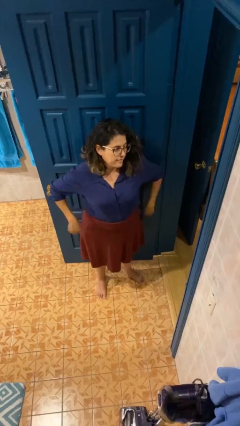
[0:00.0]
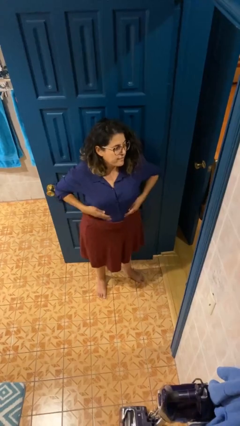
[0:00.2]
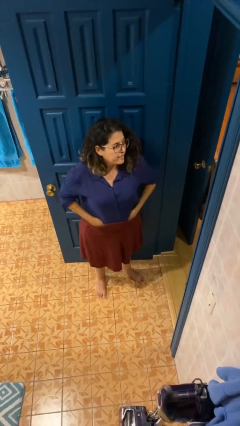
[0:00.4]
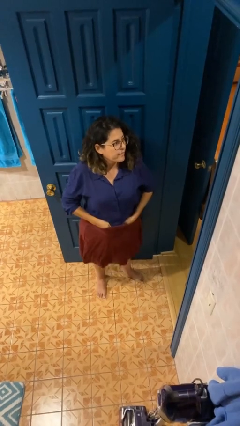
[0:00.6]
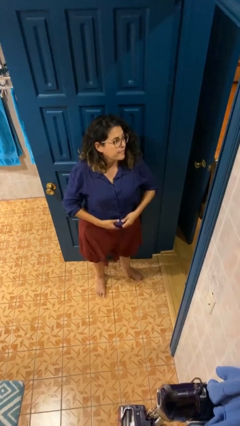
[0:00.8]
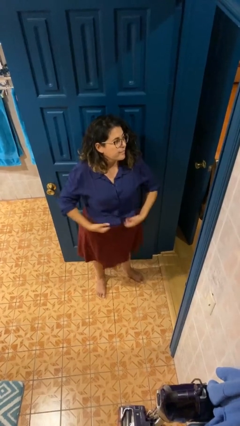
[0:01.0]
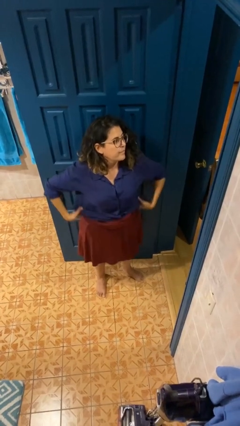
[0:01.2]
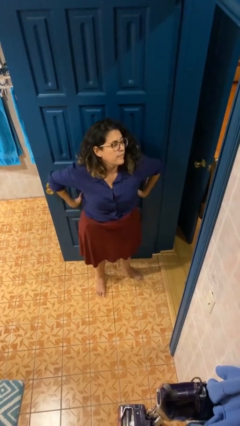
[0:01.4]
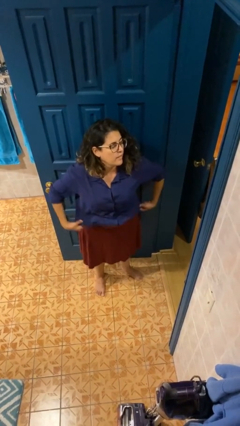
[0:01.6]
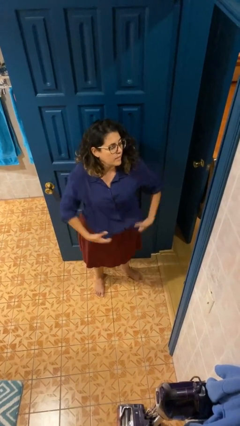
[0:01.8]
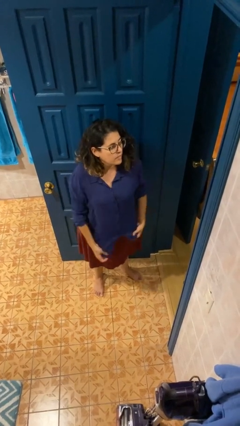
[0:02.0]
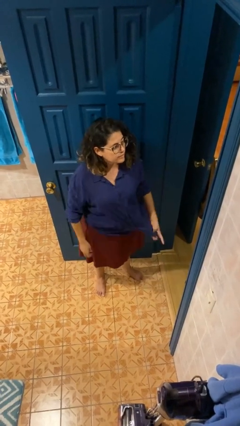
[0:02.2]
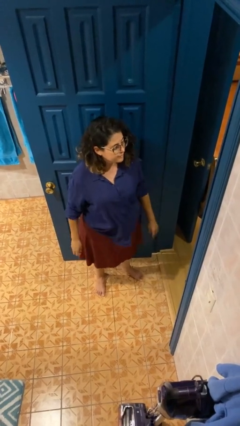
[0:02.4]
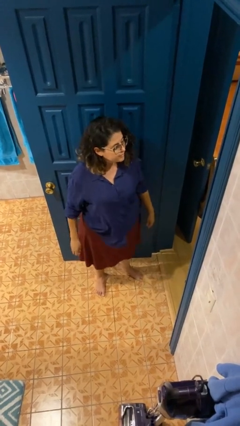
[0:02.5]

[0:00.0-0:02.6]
person untucks shirt

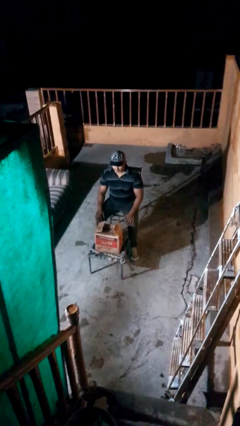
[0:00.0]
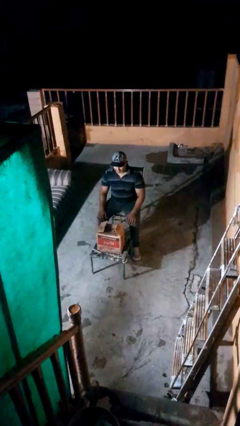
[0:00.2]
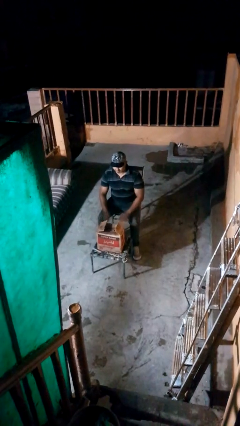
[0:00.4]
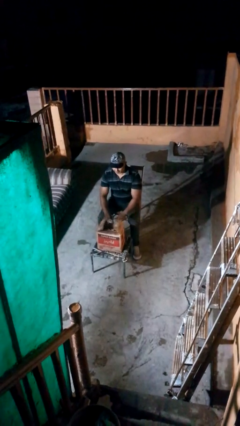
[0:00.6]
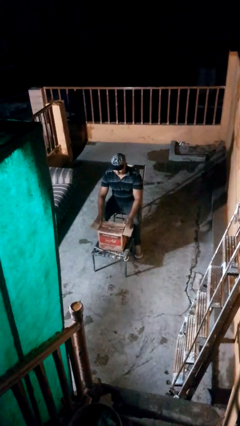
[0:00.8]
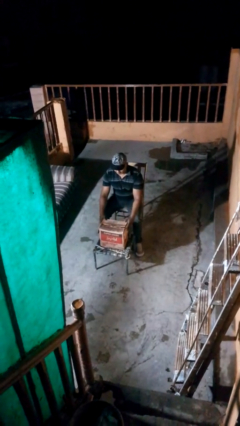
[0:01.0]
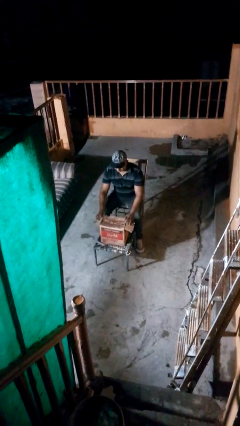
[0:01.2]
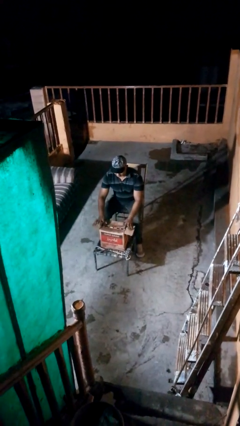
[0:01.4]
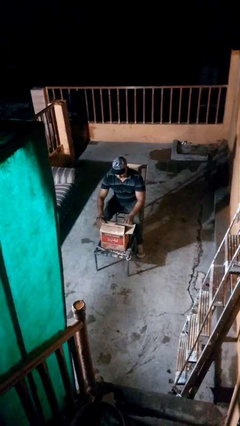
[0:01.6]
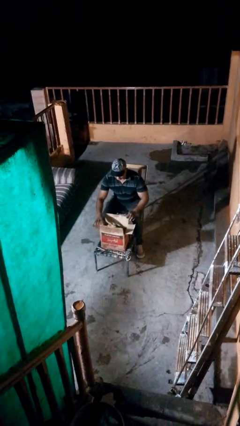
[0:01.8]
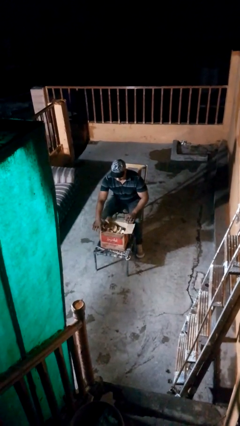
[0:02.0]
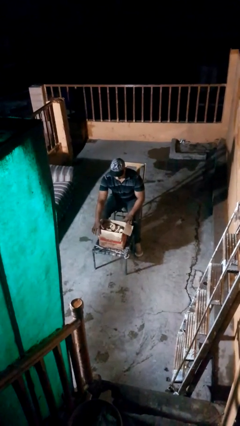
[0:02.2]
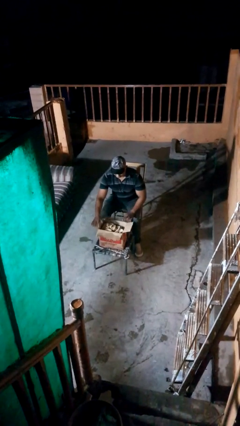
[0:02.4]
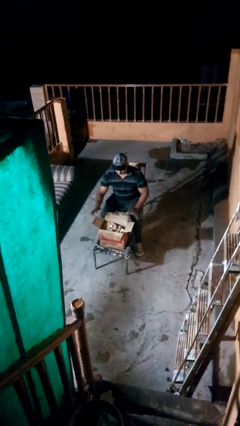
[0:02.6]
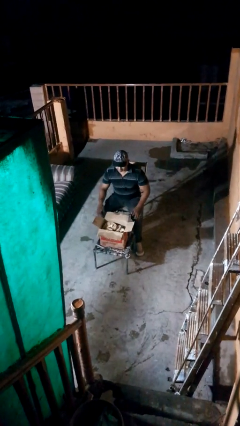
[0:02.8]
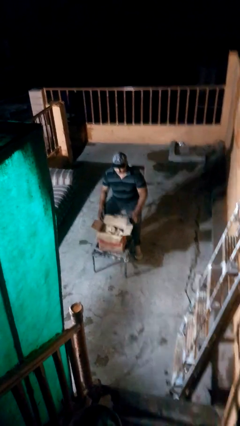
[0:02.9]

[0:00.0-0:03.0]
person opens box

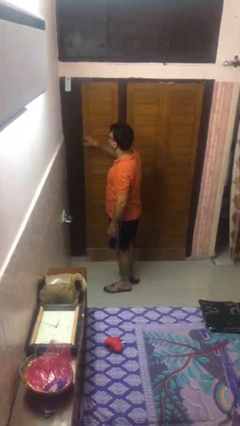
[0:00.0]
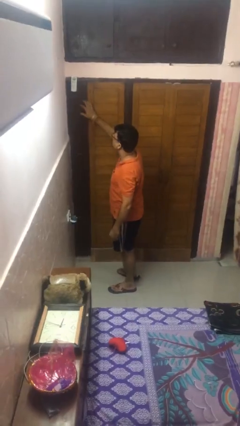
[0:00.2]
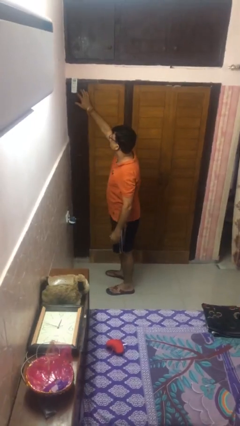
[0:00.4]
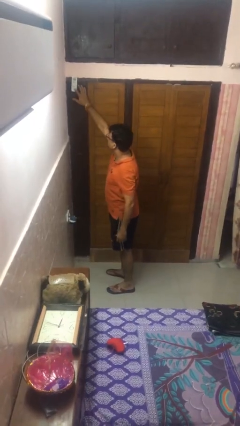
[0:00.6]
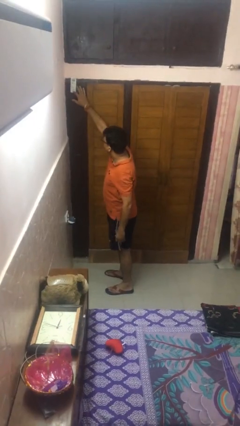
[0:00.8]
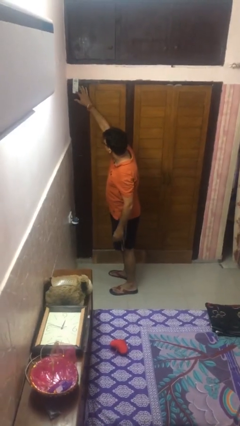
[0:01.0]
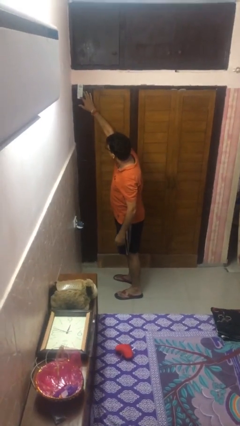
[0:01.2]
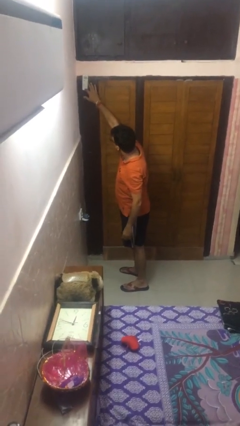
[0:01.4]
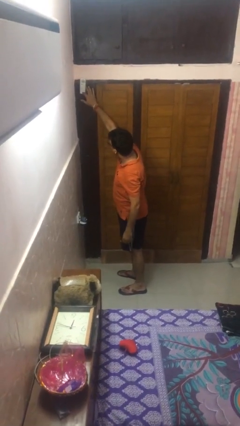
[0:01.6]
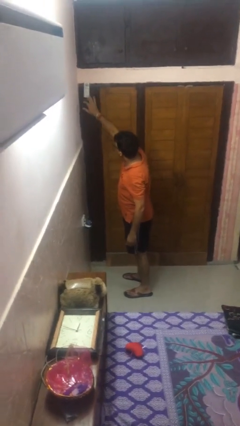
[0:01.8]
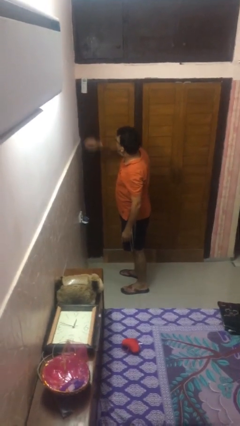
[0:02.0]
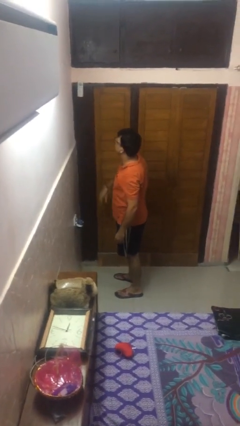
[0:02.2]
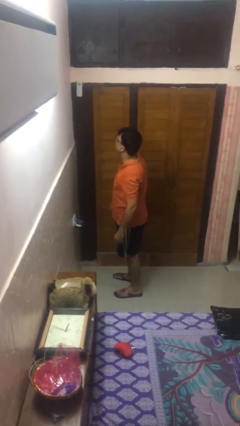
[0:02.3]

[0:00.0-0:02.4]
person adjusts thermostat

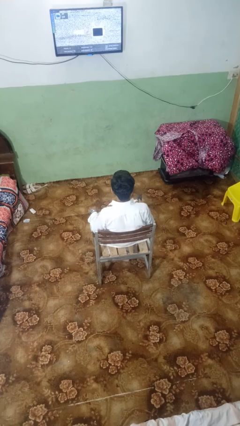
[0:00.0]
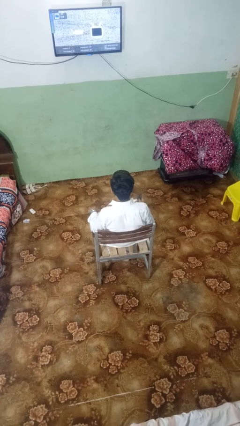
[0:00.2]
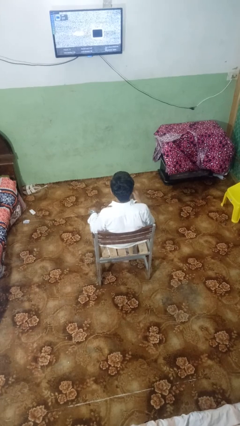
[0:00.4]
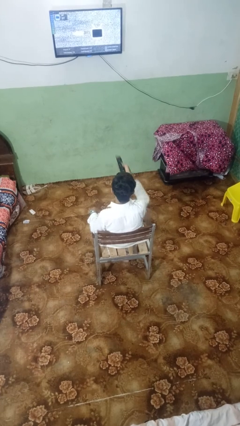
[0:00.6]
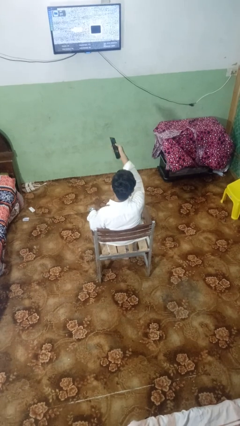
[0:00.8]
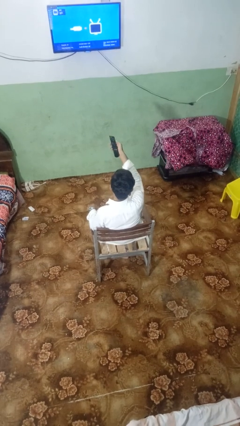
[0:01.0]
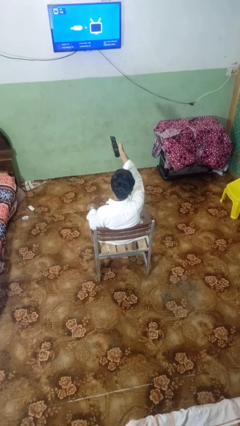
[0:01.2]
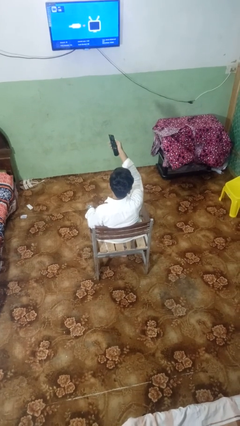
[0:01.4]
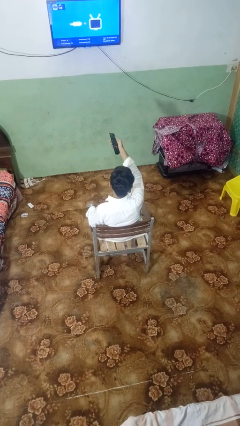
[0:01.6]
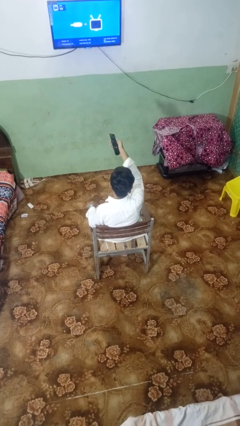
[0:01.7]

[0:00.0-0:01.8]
person uses television remote

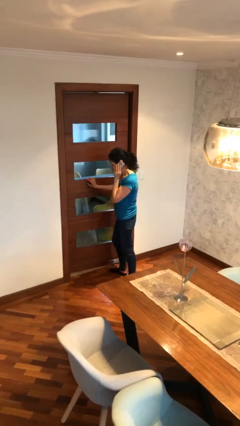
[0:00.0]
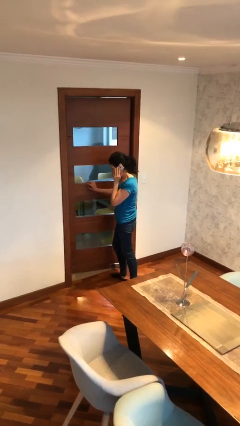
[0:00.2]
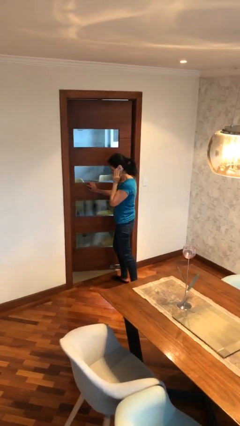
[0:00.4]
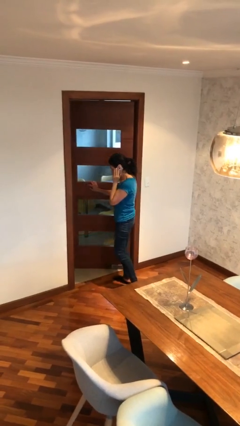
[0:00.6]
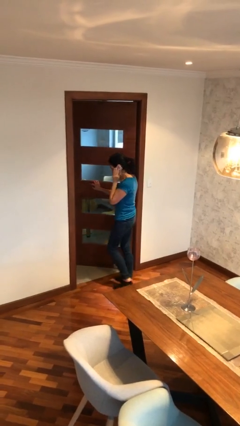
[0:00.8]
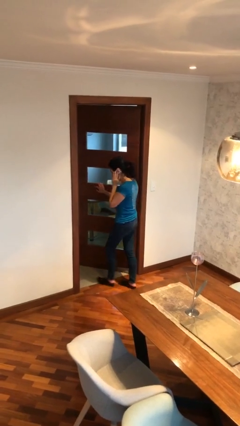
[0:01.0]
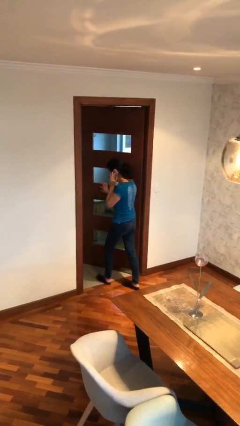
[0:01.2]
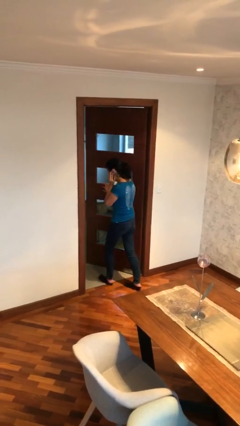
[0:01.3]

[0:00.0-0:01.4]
person opens facility door

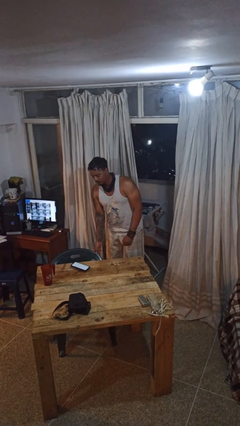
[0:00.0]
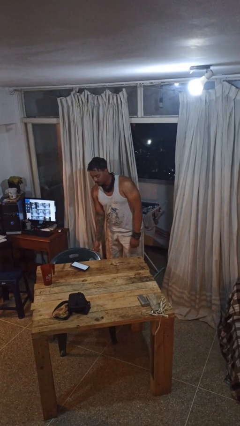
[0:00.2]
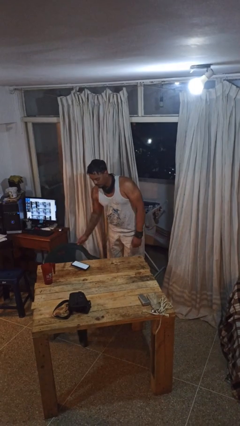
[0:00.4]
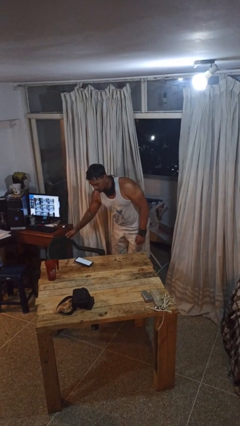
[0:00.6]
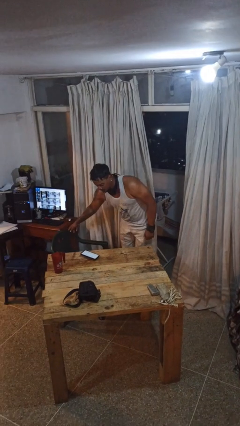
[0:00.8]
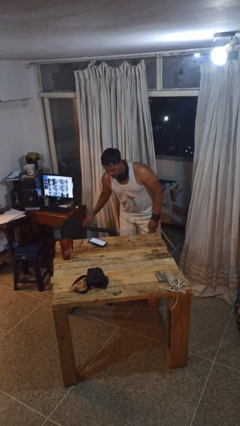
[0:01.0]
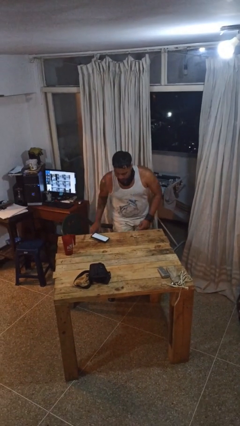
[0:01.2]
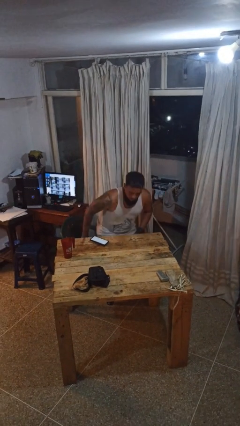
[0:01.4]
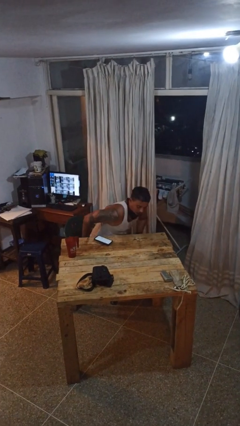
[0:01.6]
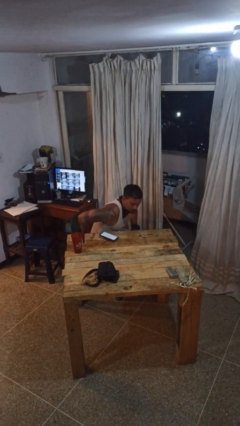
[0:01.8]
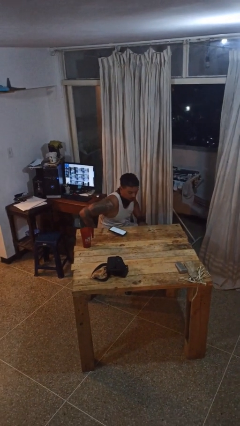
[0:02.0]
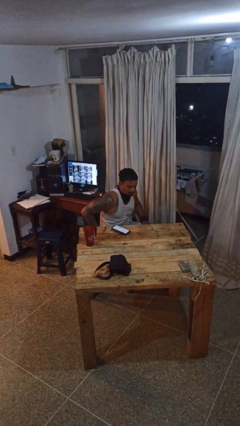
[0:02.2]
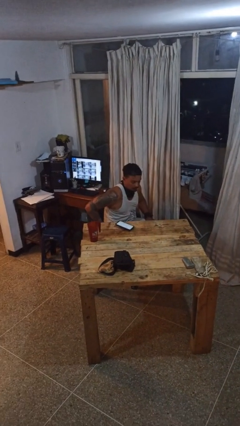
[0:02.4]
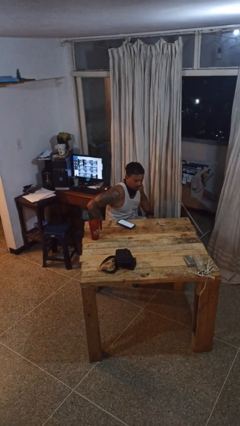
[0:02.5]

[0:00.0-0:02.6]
person sits down

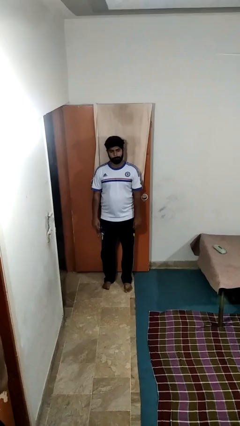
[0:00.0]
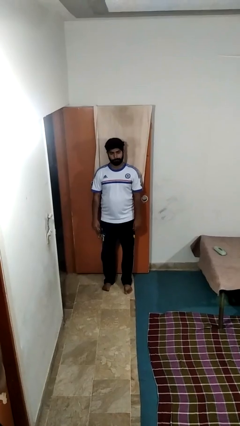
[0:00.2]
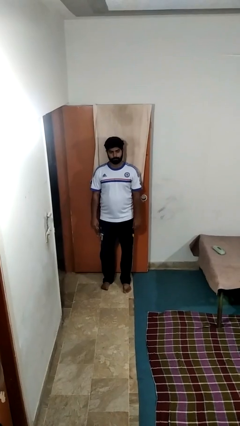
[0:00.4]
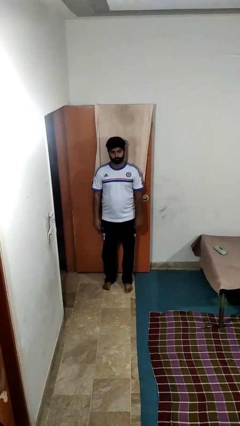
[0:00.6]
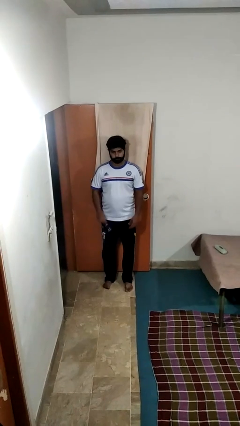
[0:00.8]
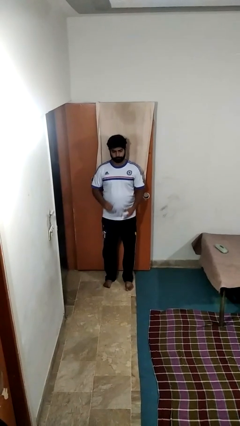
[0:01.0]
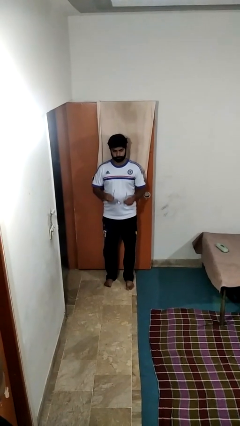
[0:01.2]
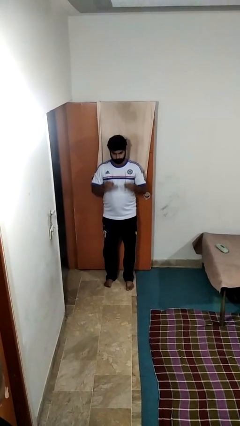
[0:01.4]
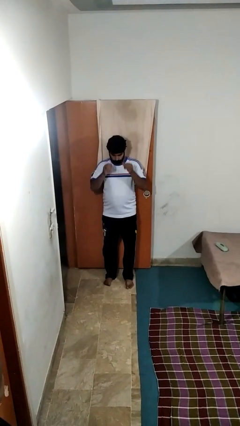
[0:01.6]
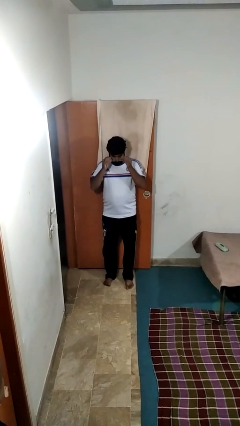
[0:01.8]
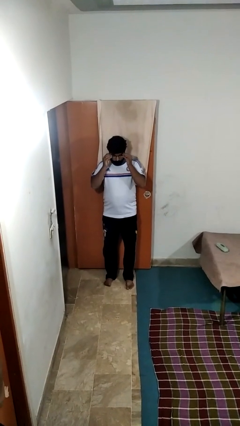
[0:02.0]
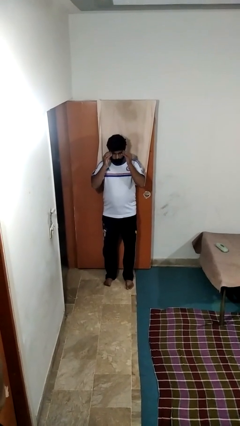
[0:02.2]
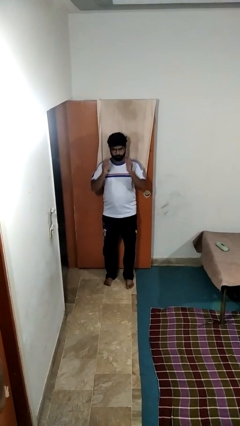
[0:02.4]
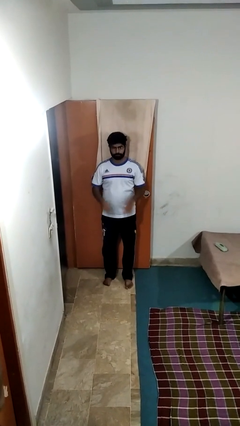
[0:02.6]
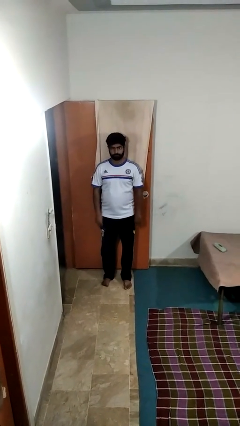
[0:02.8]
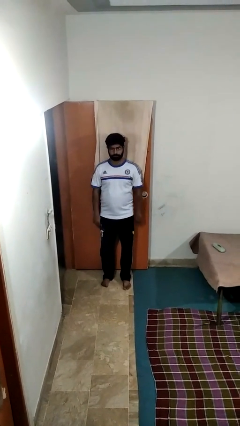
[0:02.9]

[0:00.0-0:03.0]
person puts on glasses
